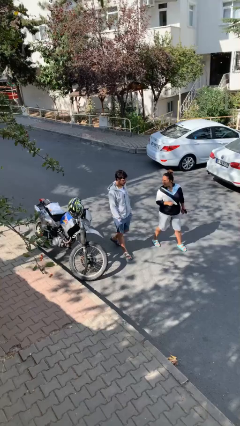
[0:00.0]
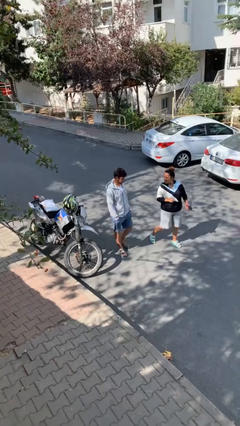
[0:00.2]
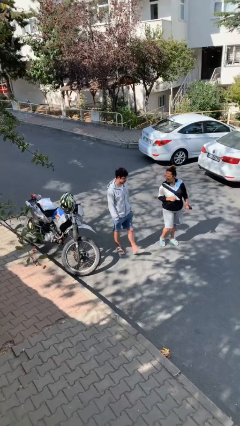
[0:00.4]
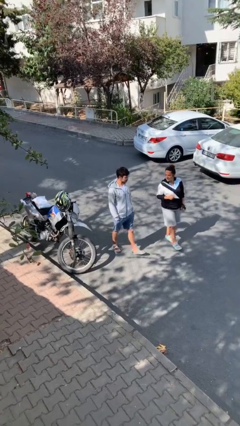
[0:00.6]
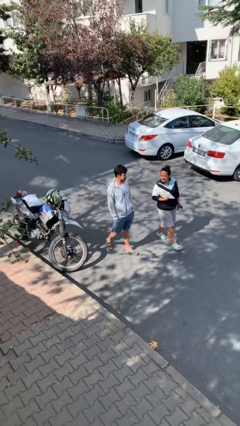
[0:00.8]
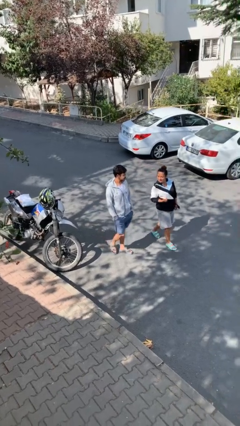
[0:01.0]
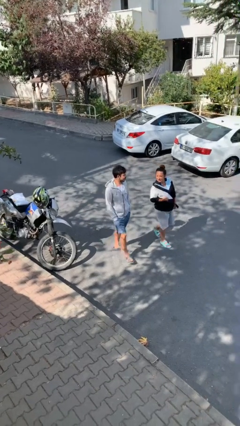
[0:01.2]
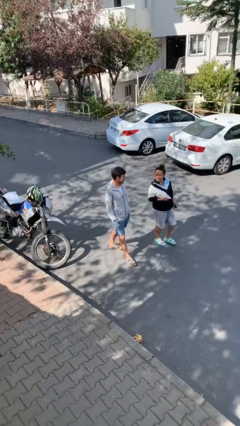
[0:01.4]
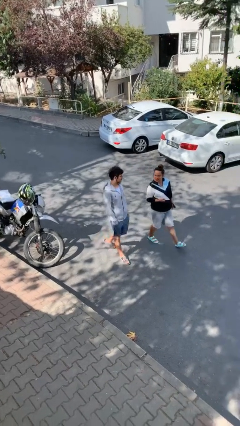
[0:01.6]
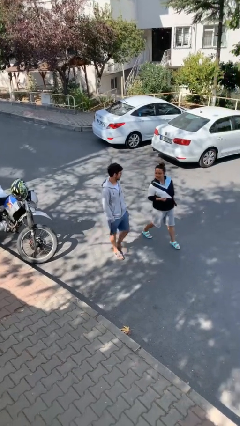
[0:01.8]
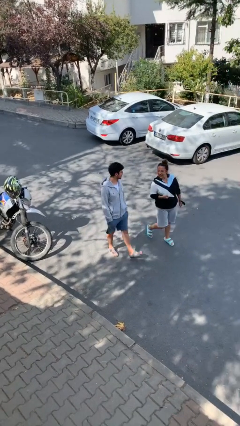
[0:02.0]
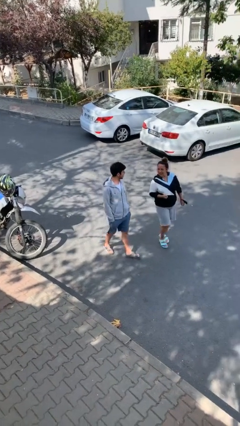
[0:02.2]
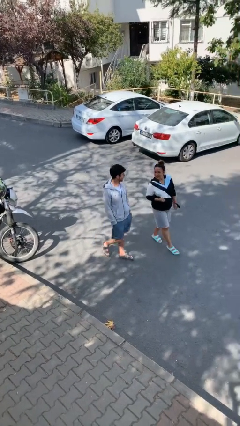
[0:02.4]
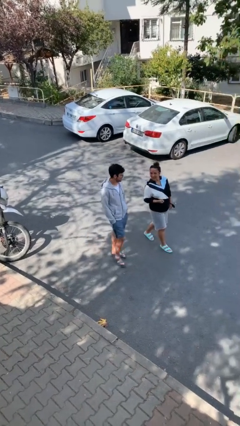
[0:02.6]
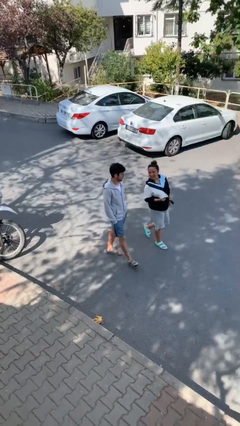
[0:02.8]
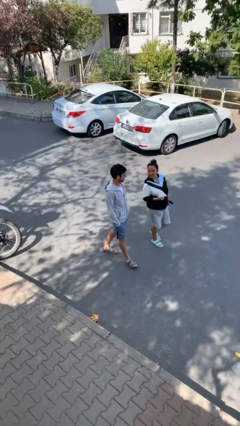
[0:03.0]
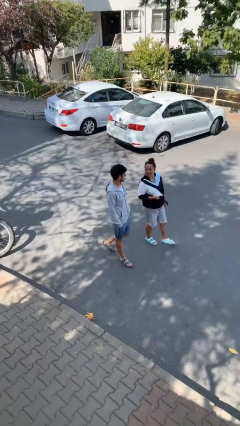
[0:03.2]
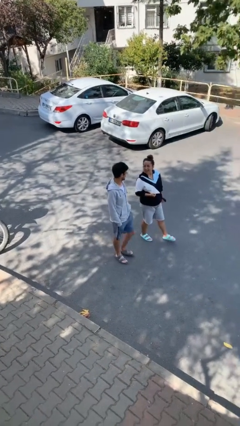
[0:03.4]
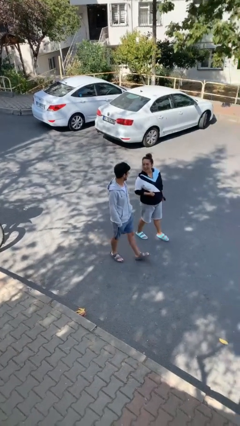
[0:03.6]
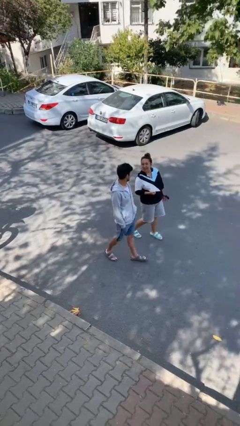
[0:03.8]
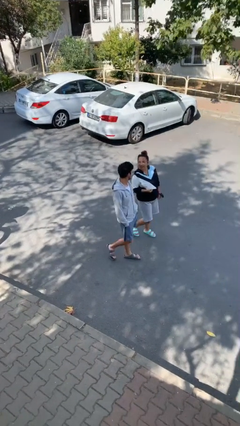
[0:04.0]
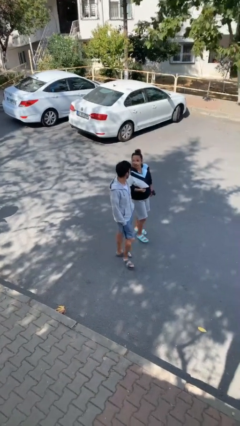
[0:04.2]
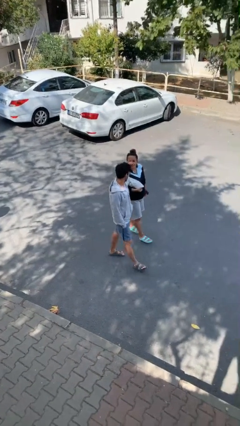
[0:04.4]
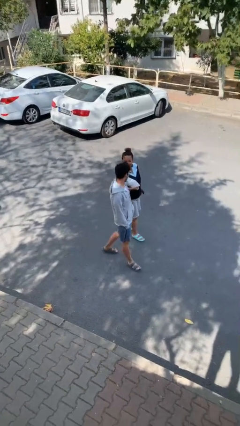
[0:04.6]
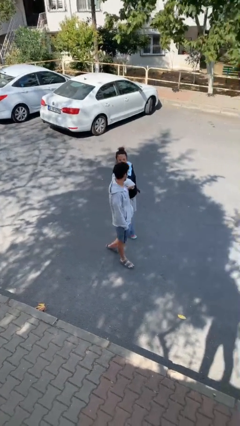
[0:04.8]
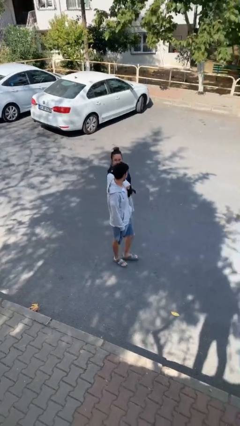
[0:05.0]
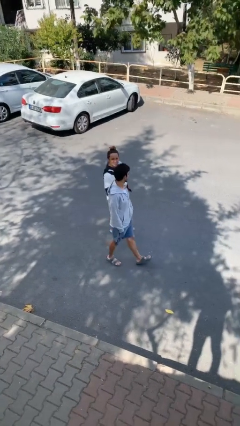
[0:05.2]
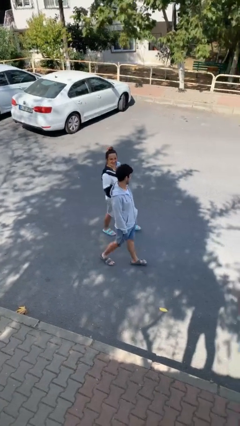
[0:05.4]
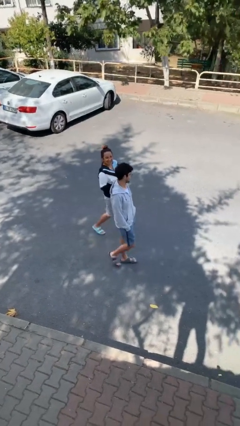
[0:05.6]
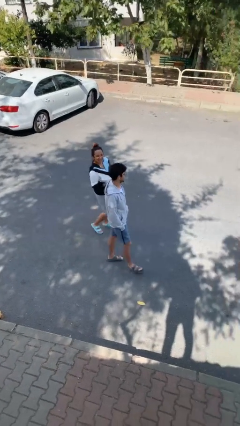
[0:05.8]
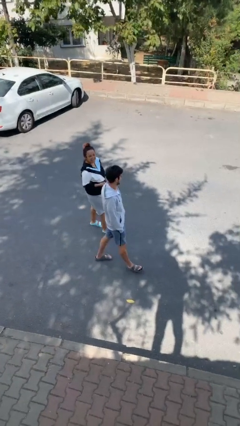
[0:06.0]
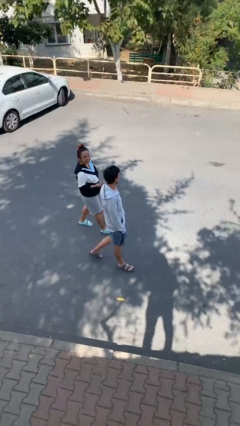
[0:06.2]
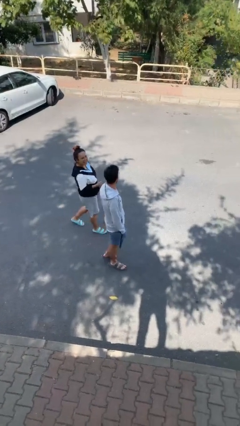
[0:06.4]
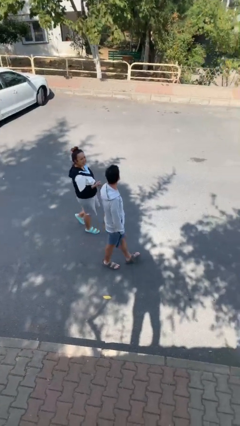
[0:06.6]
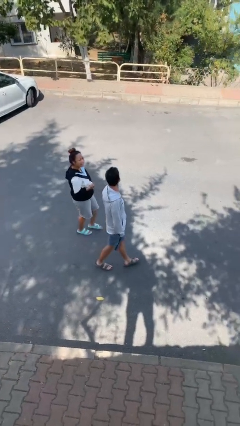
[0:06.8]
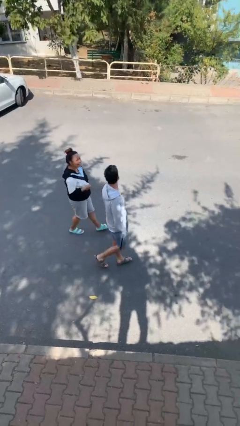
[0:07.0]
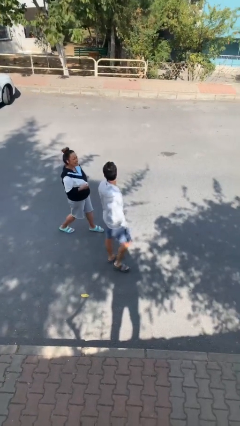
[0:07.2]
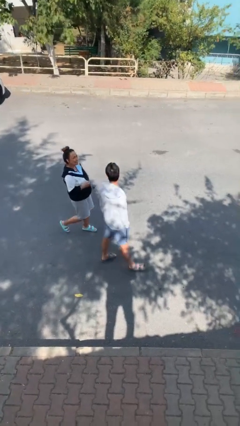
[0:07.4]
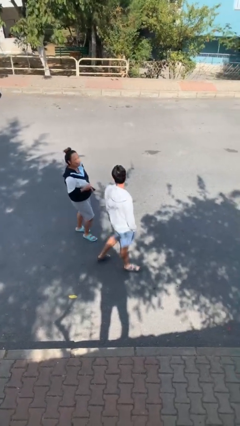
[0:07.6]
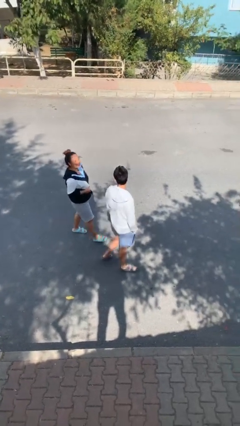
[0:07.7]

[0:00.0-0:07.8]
person talks to person

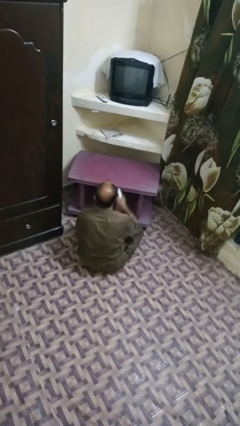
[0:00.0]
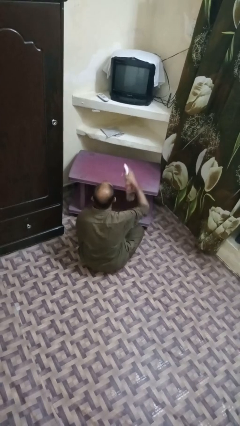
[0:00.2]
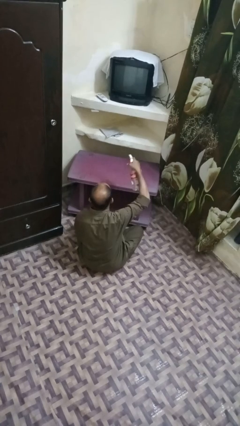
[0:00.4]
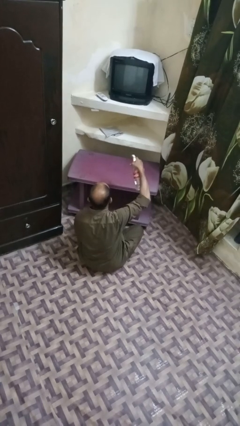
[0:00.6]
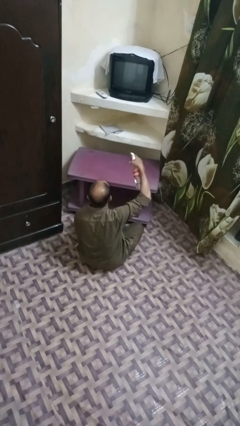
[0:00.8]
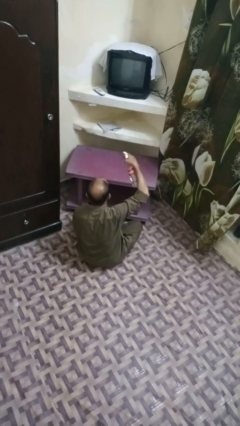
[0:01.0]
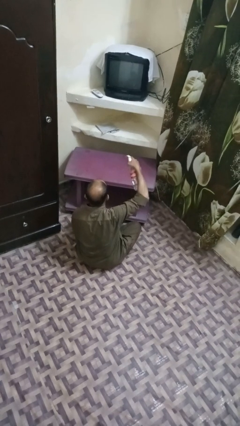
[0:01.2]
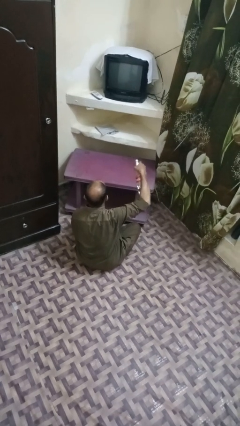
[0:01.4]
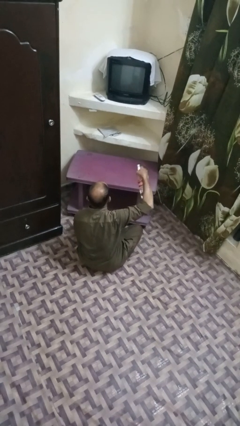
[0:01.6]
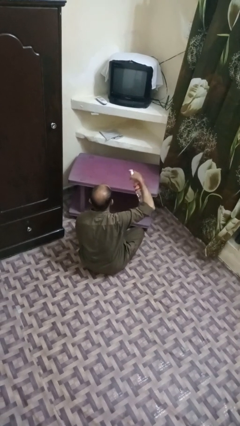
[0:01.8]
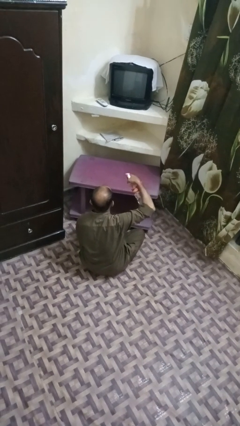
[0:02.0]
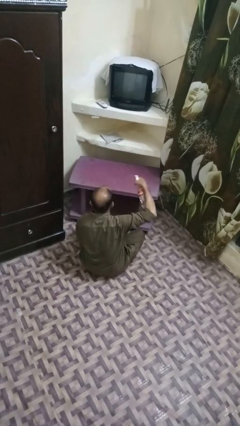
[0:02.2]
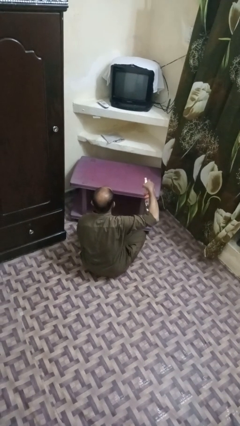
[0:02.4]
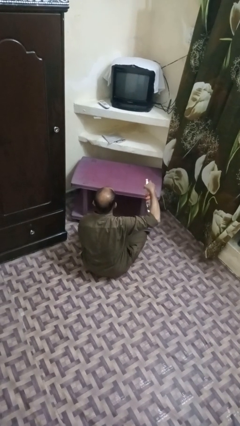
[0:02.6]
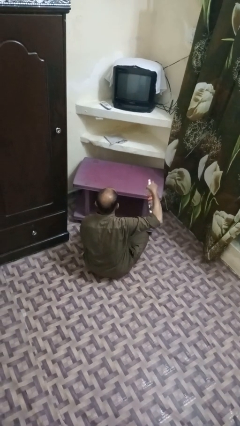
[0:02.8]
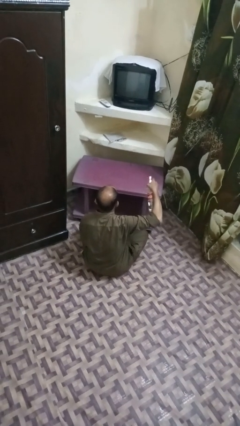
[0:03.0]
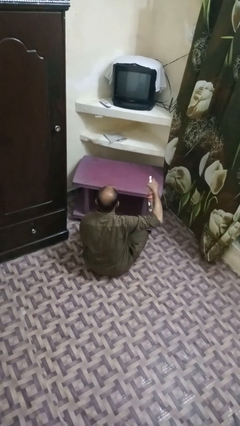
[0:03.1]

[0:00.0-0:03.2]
person sprays from bottle

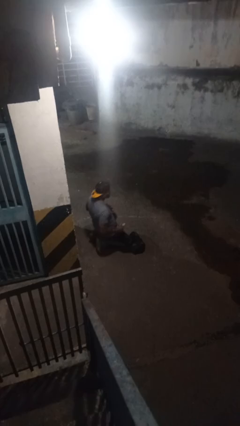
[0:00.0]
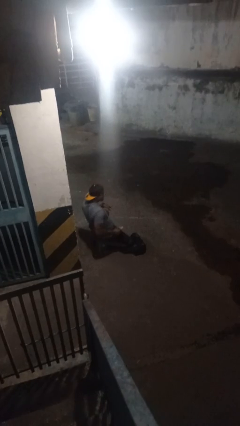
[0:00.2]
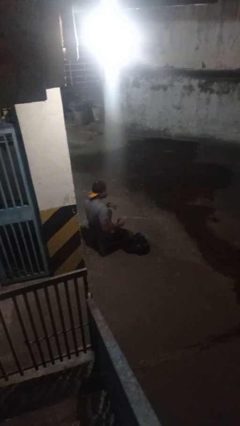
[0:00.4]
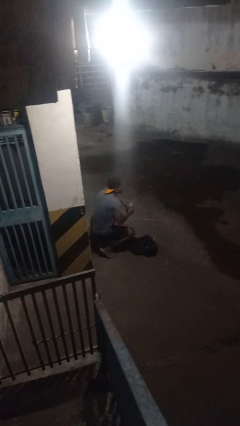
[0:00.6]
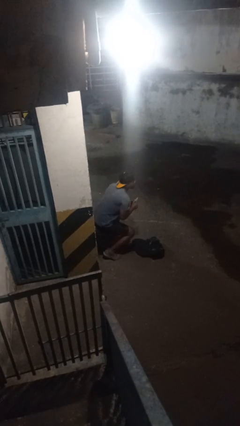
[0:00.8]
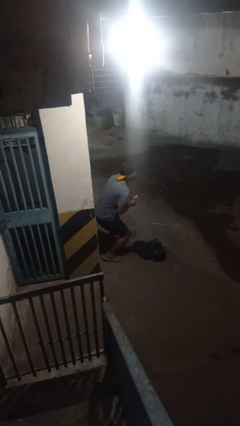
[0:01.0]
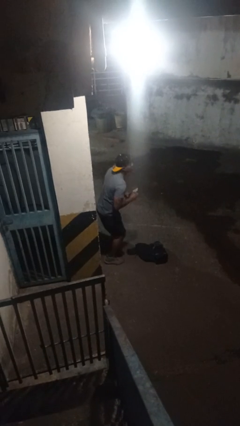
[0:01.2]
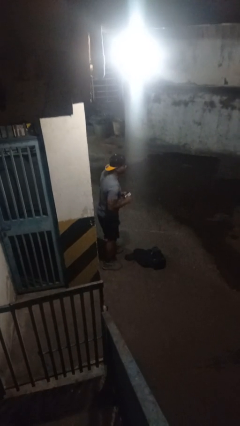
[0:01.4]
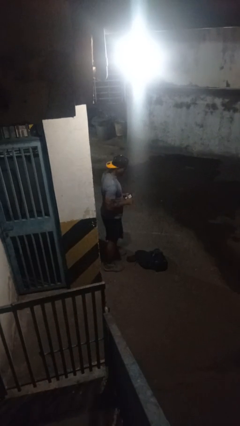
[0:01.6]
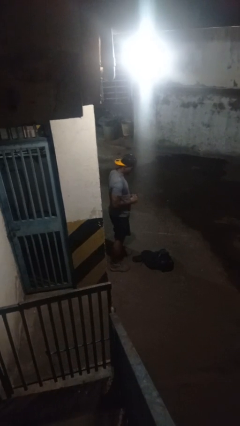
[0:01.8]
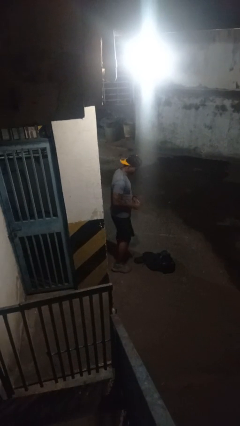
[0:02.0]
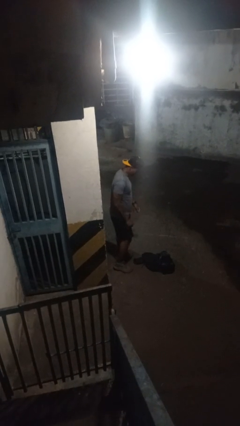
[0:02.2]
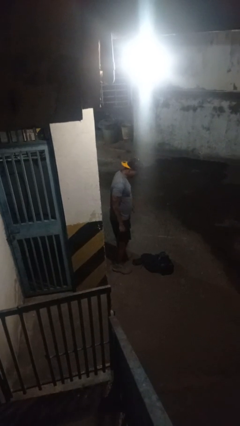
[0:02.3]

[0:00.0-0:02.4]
person stands up from floor

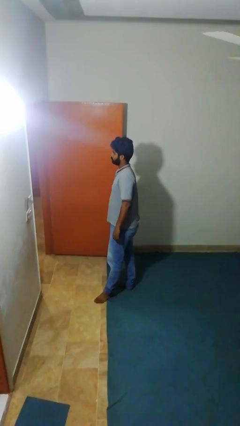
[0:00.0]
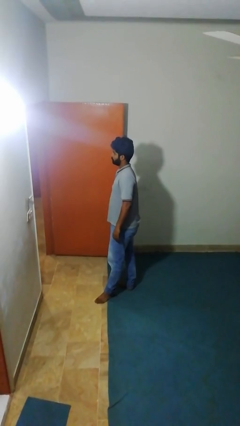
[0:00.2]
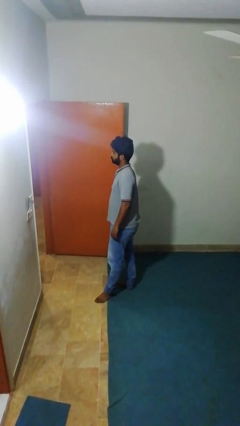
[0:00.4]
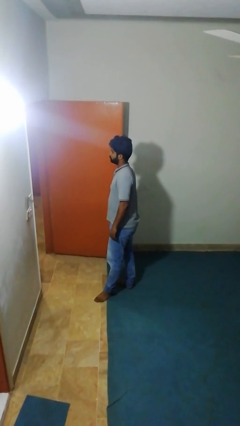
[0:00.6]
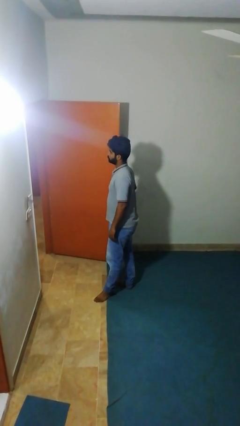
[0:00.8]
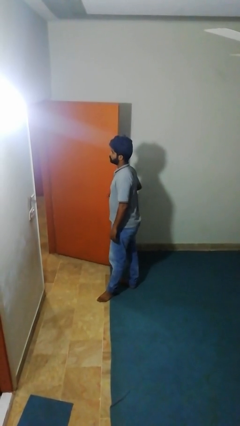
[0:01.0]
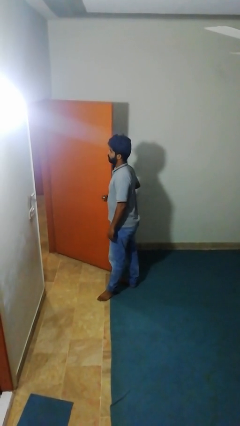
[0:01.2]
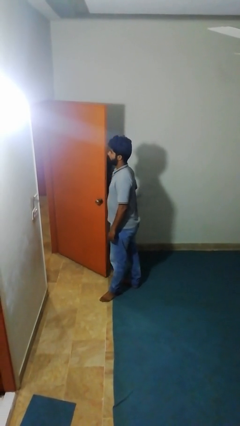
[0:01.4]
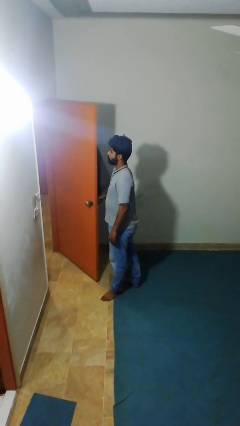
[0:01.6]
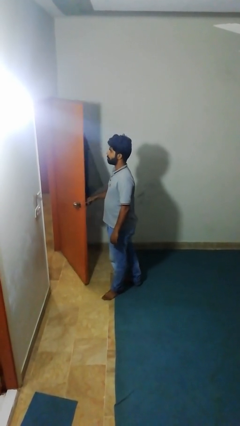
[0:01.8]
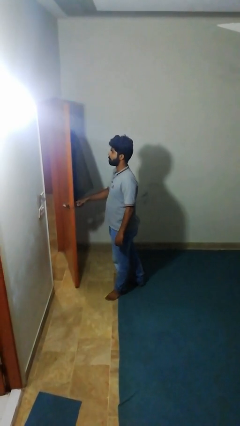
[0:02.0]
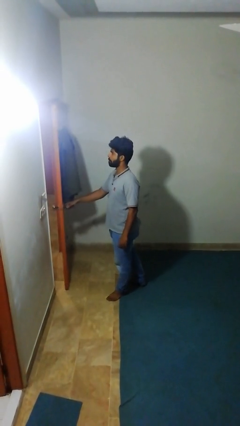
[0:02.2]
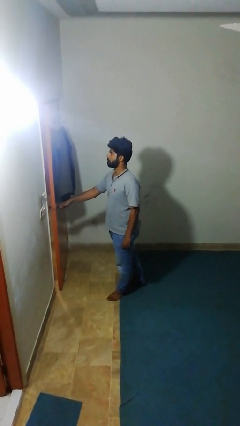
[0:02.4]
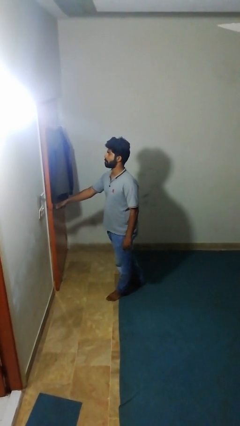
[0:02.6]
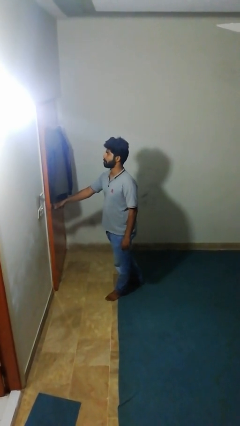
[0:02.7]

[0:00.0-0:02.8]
person closes facility door

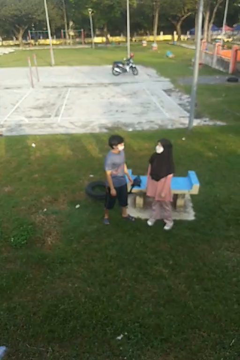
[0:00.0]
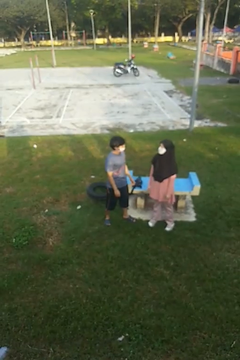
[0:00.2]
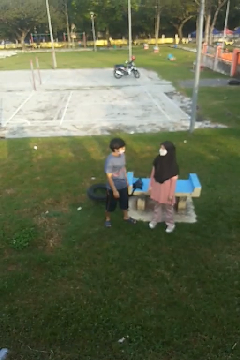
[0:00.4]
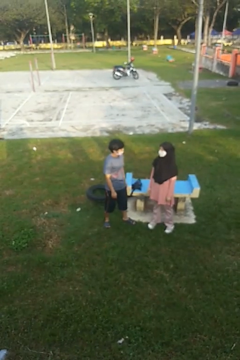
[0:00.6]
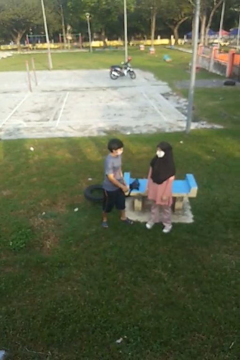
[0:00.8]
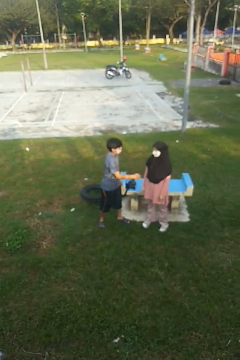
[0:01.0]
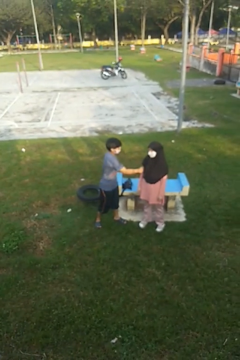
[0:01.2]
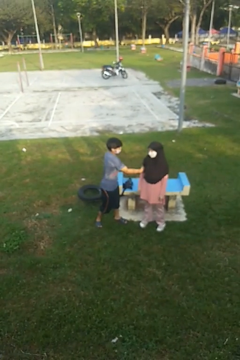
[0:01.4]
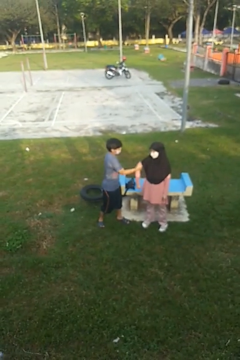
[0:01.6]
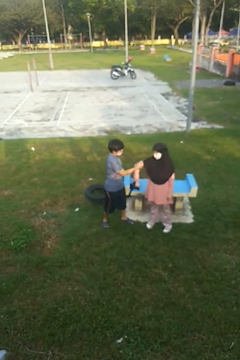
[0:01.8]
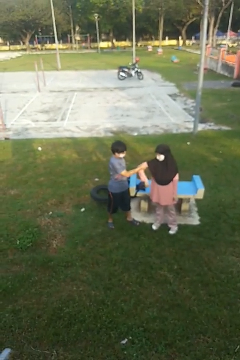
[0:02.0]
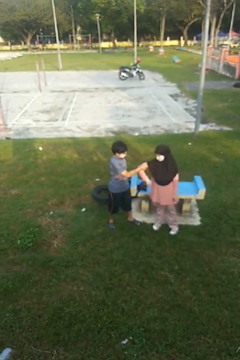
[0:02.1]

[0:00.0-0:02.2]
person grabs person by bicep
